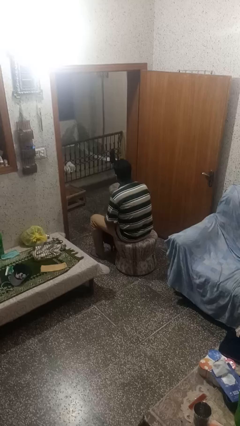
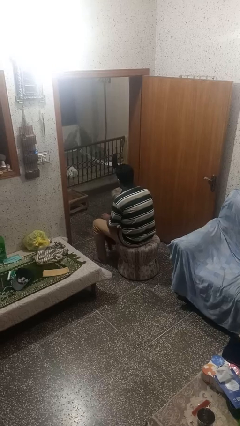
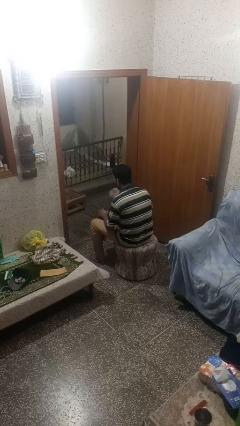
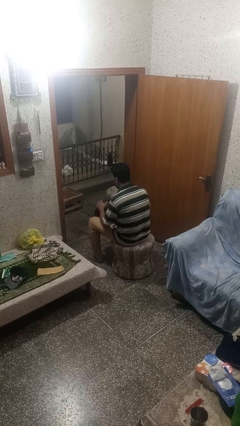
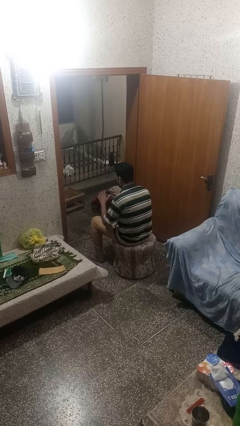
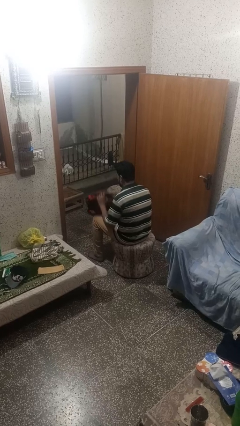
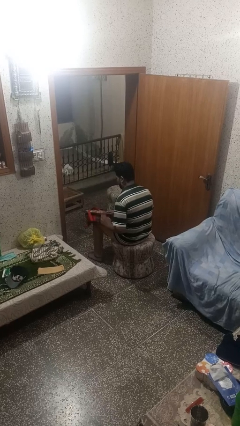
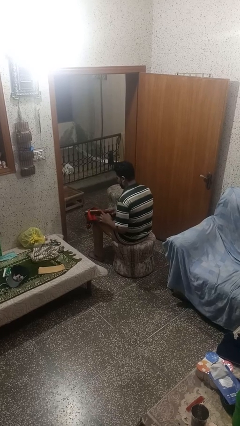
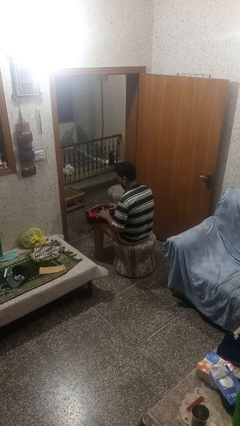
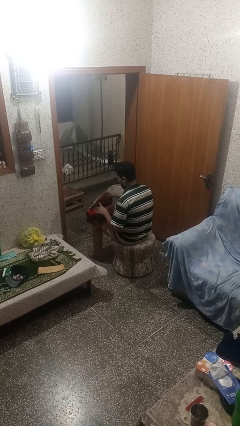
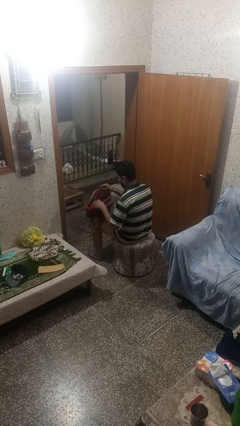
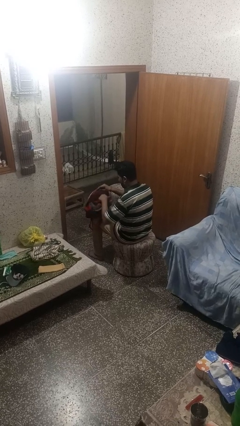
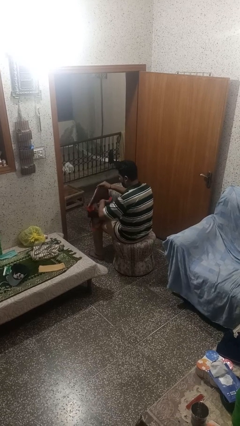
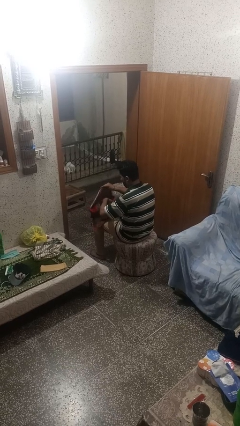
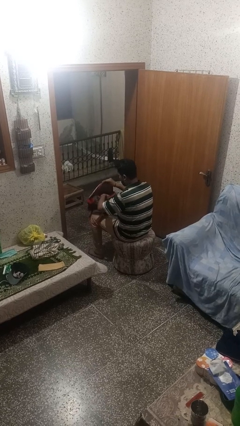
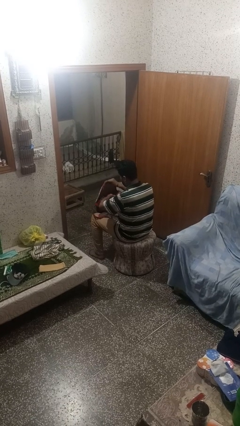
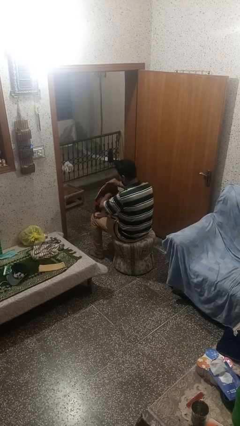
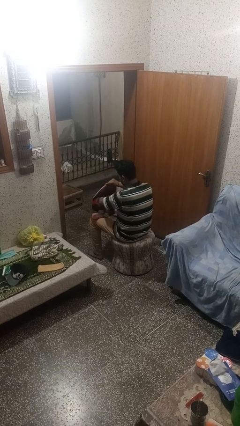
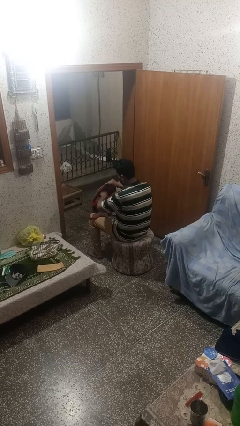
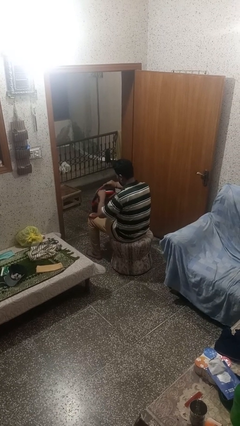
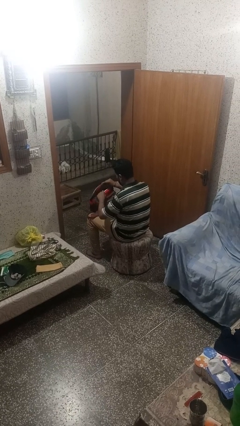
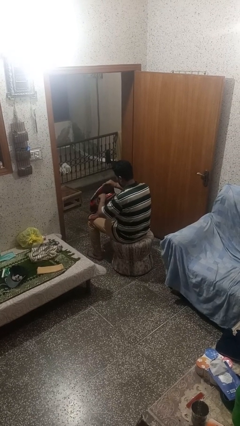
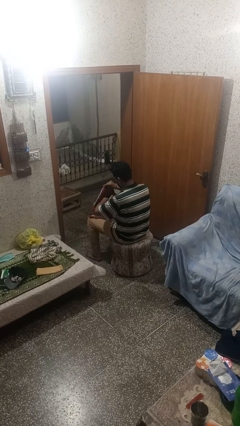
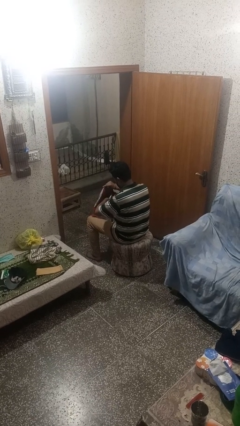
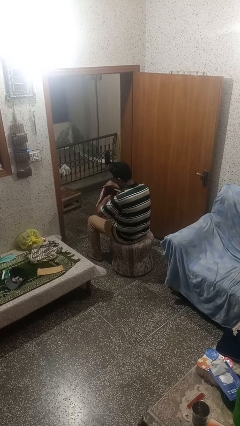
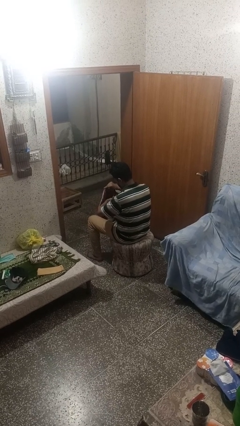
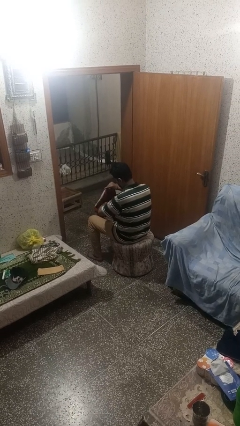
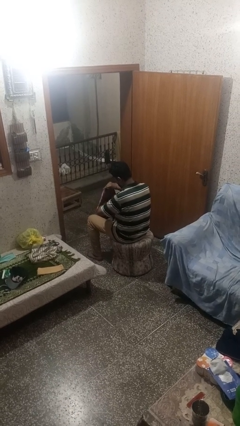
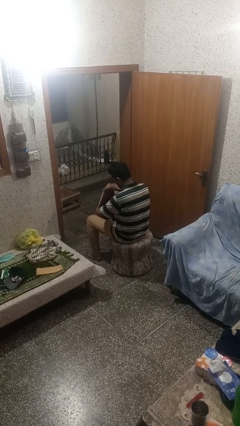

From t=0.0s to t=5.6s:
person searches in backpack

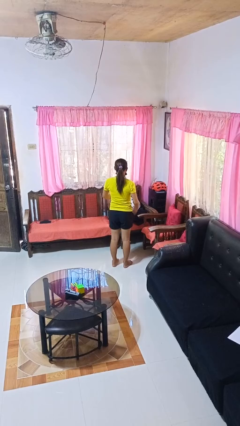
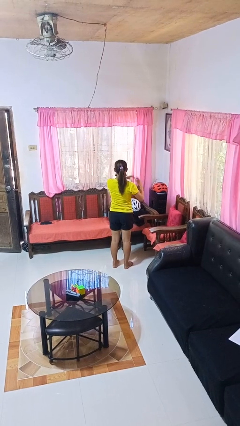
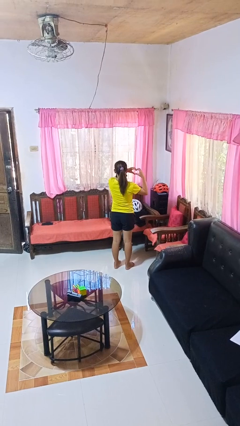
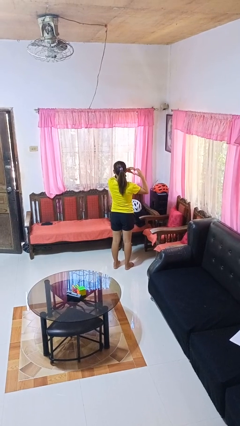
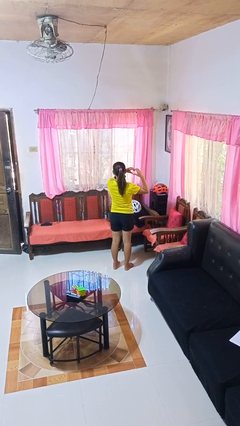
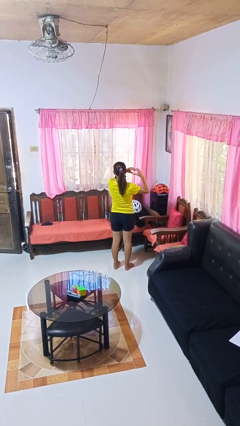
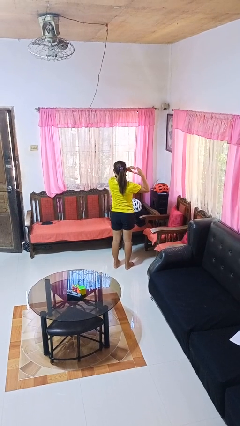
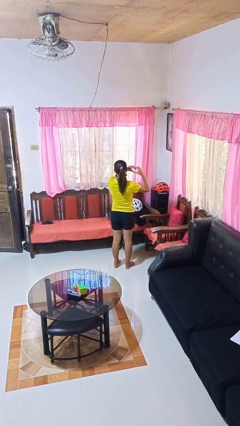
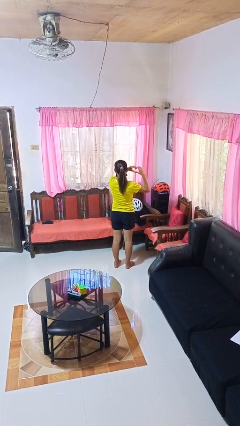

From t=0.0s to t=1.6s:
person gestures heart

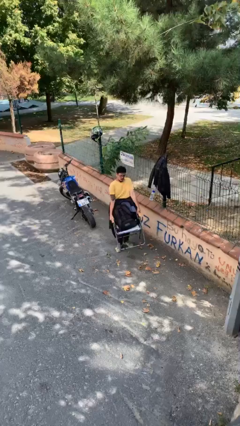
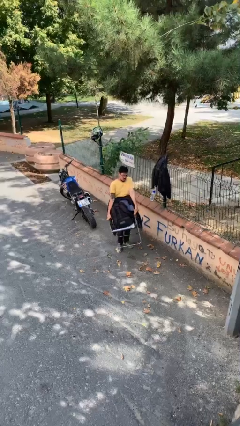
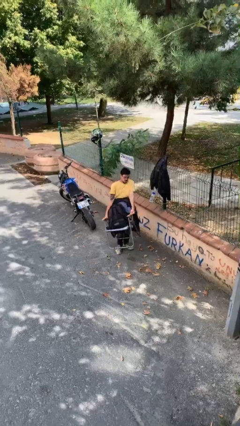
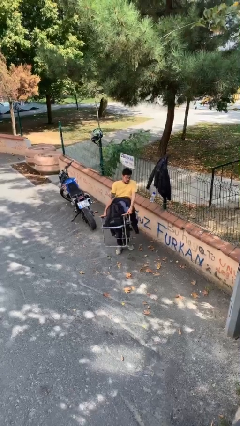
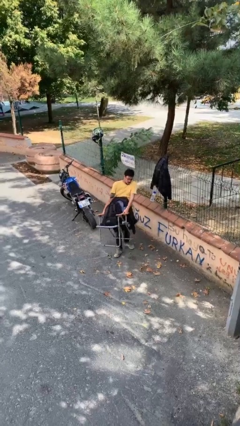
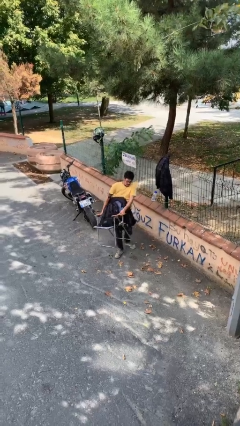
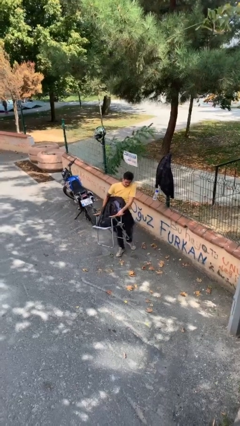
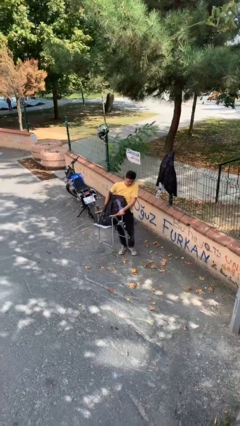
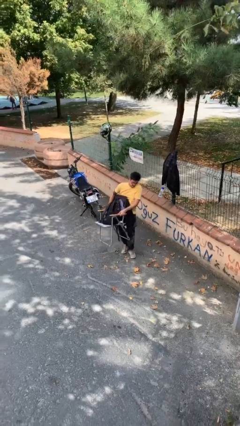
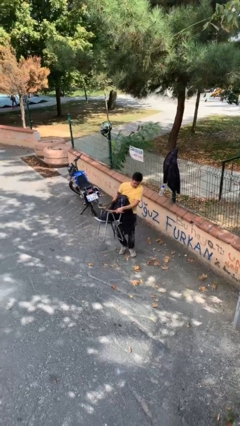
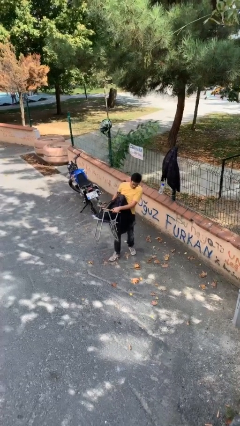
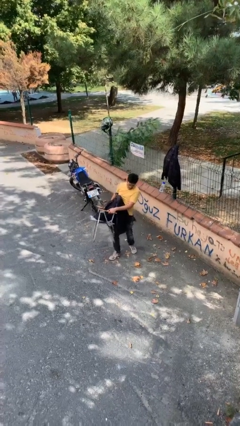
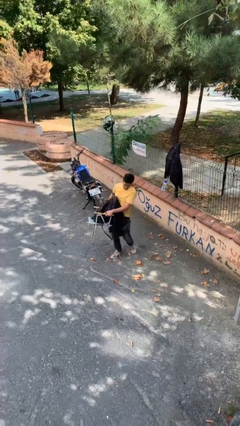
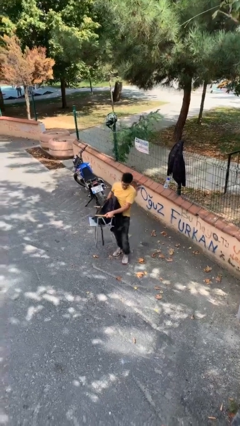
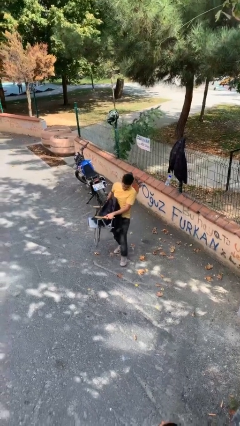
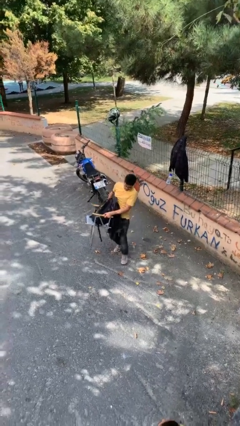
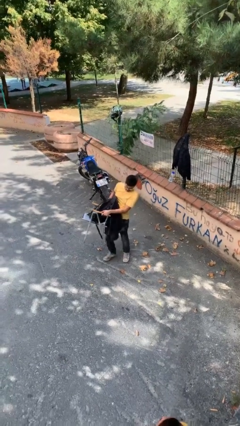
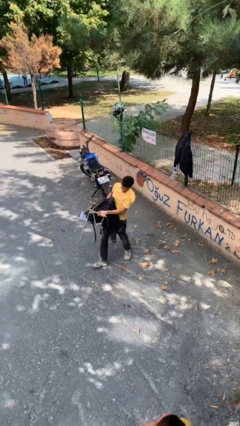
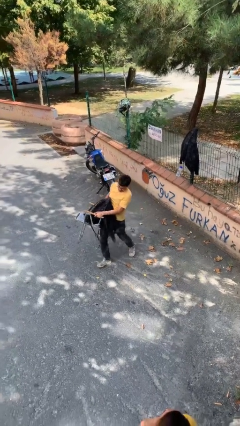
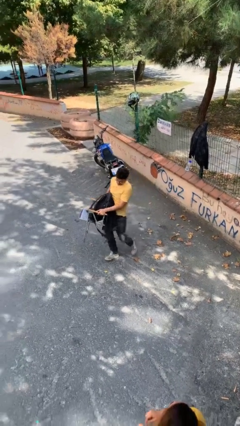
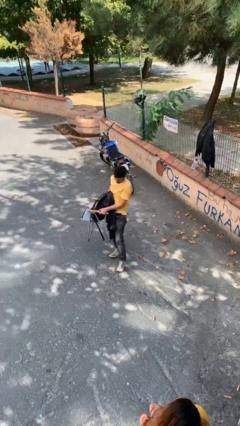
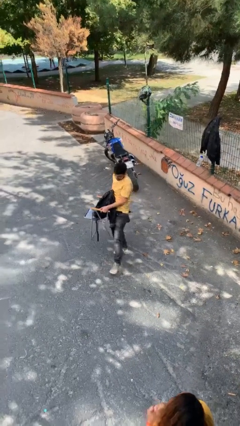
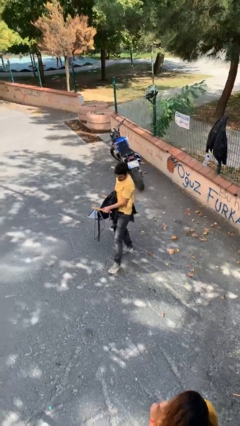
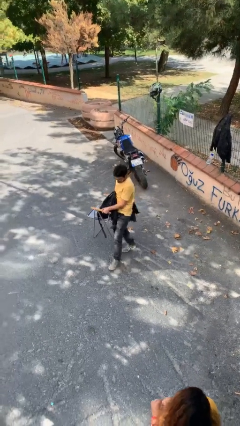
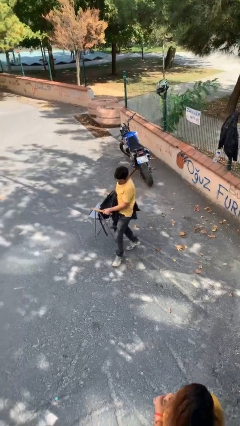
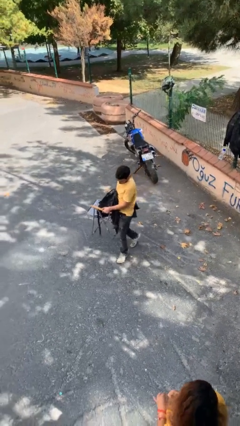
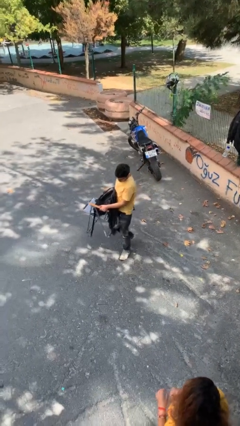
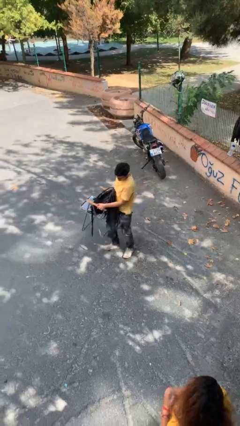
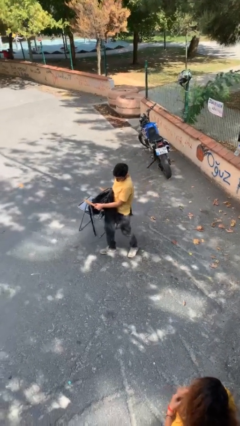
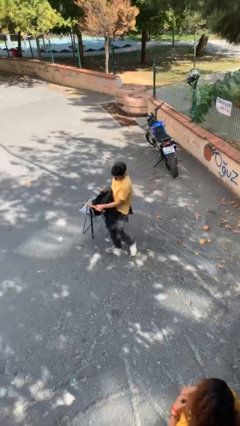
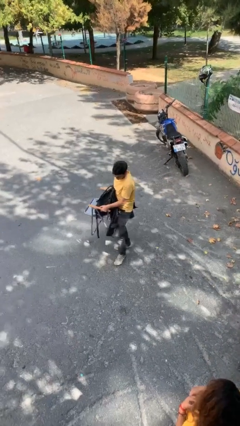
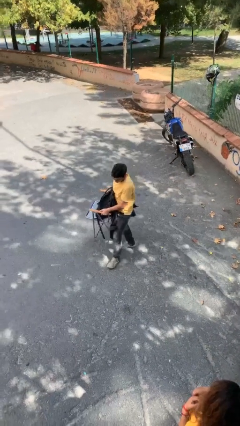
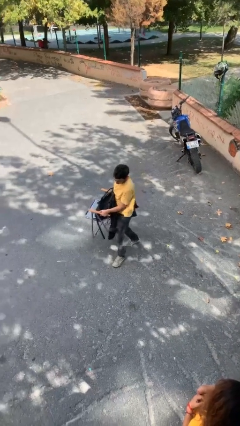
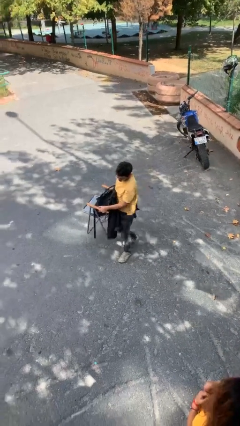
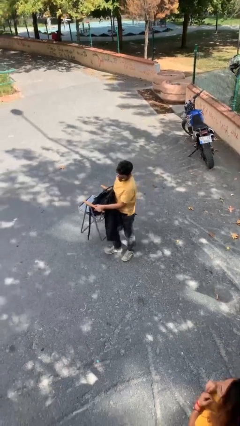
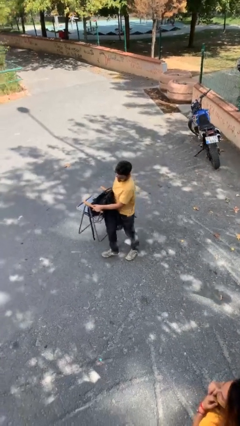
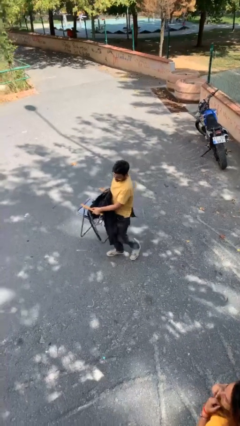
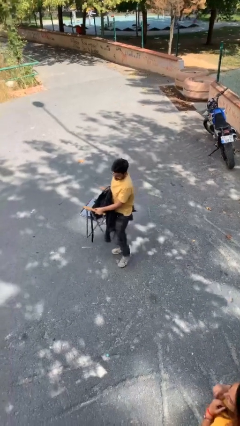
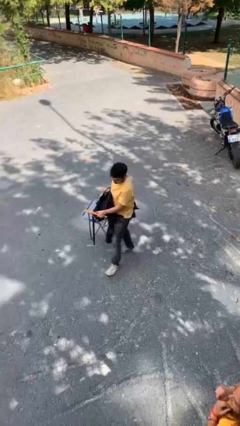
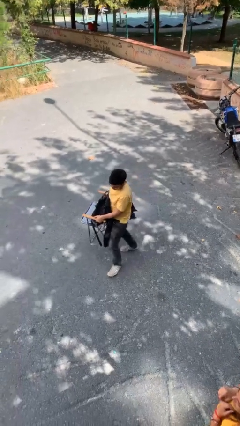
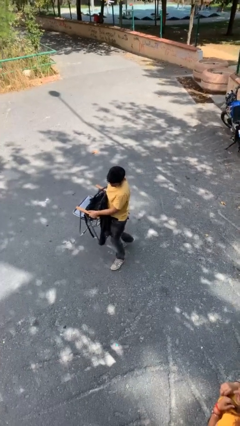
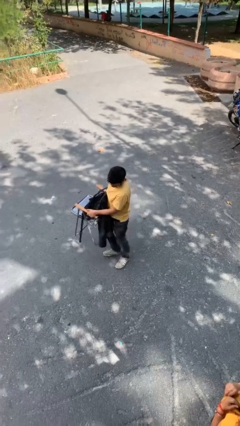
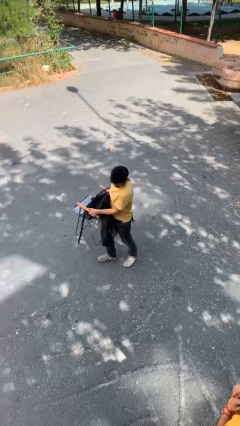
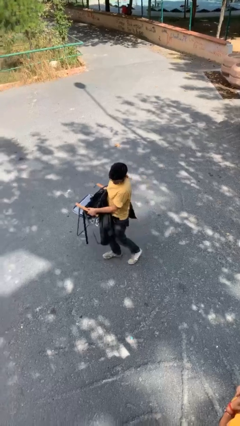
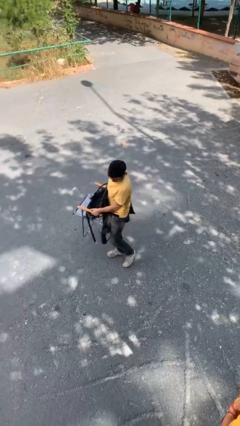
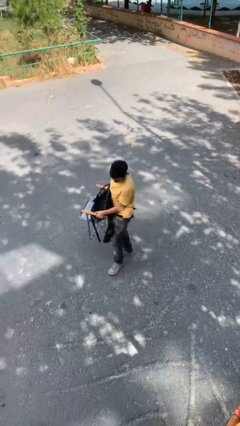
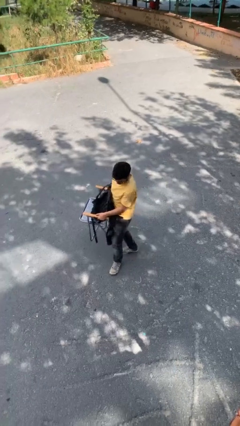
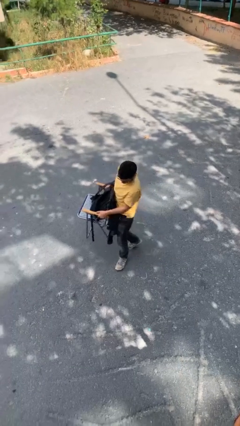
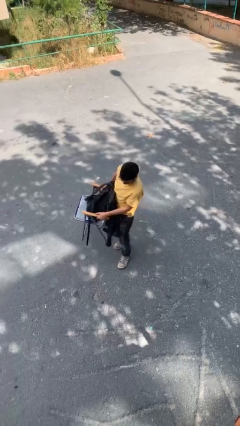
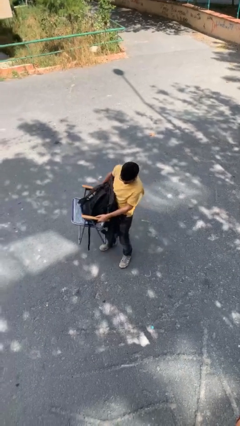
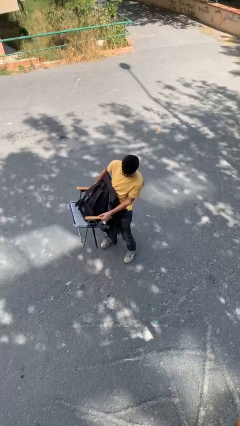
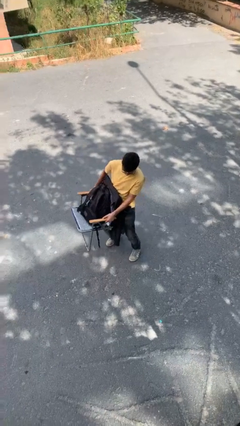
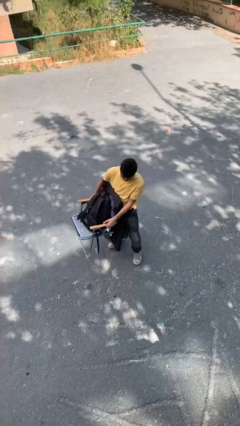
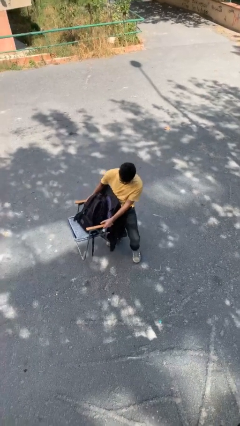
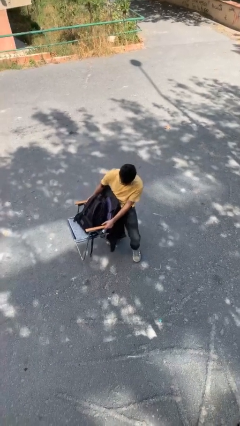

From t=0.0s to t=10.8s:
person carries heavy object
